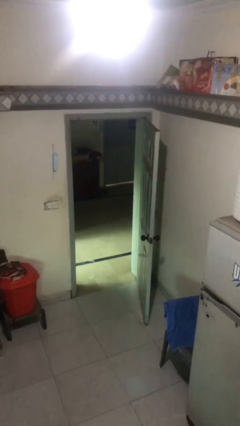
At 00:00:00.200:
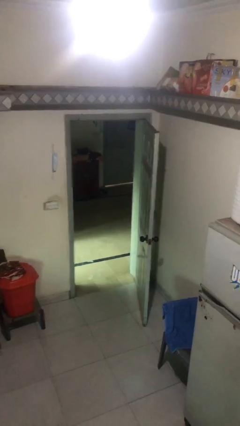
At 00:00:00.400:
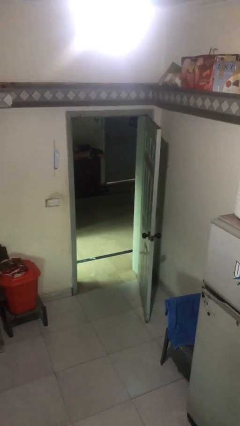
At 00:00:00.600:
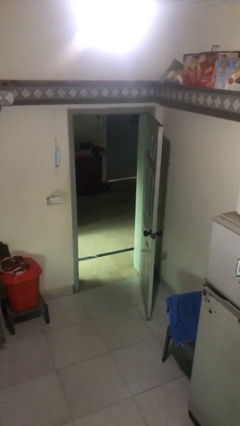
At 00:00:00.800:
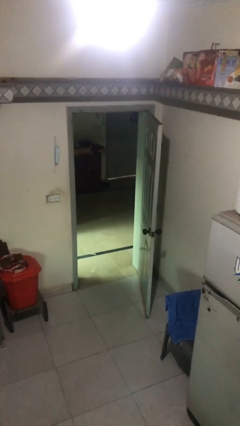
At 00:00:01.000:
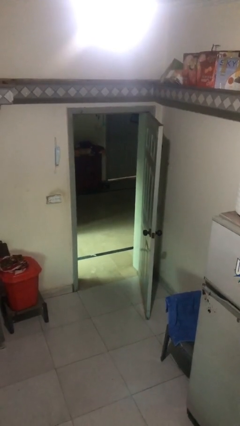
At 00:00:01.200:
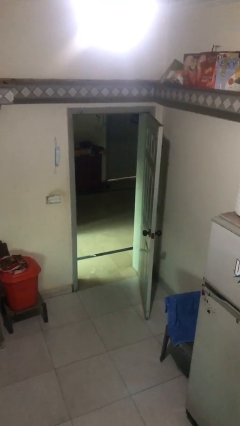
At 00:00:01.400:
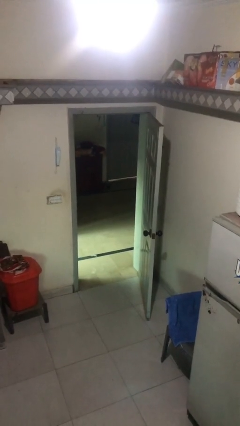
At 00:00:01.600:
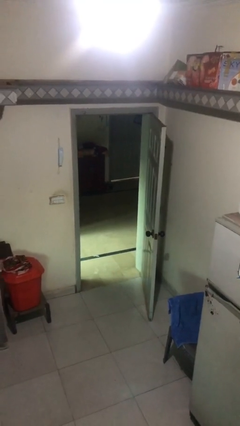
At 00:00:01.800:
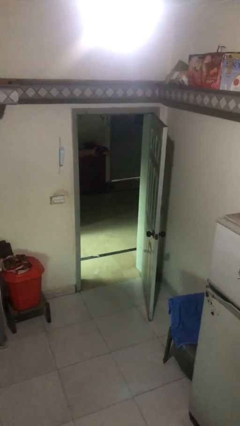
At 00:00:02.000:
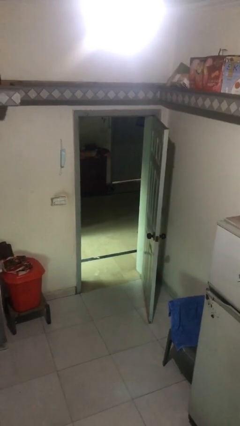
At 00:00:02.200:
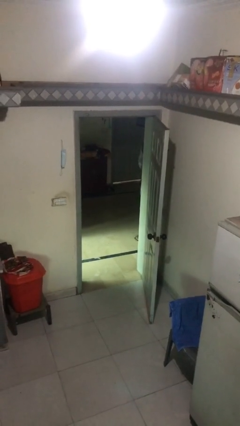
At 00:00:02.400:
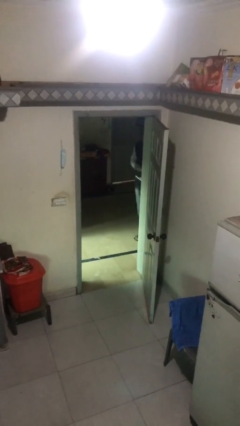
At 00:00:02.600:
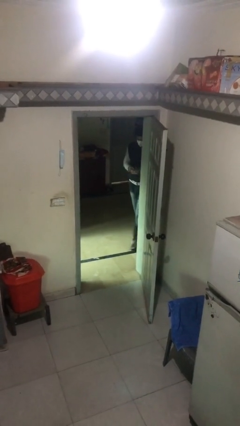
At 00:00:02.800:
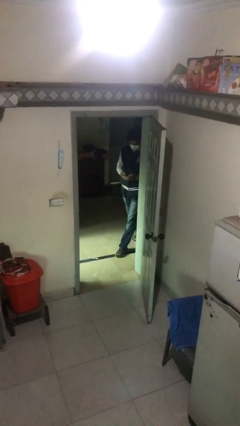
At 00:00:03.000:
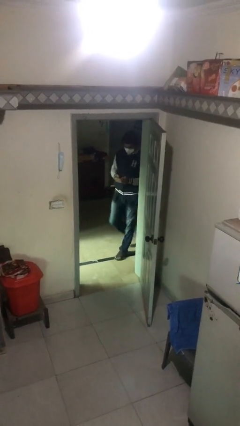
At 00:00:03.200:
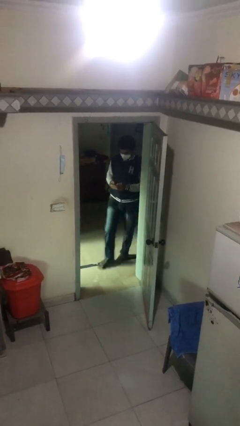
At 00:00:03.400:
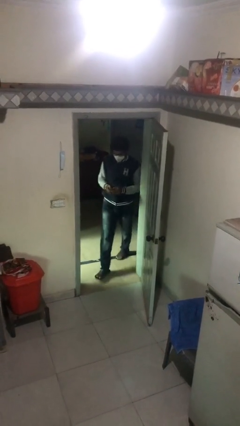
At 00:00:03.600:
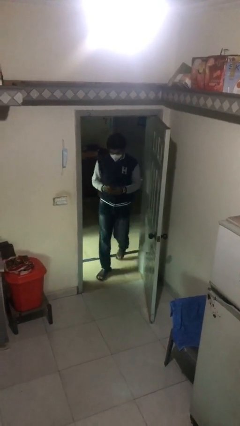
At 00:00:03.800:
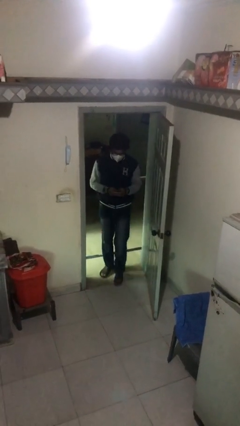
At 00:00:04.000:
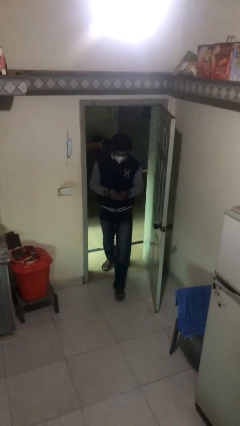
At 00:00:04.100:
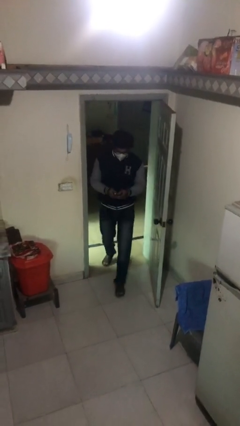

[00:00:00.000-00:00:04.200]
person enters scene through structure

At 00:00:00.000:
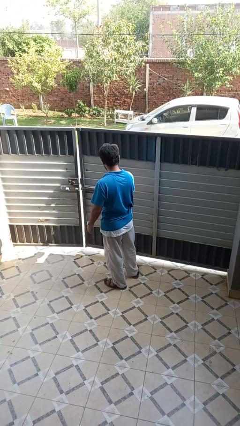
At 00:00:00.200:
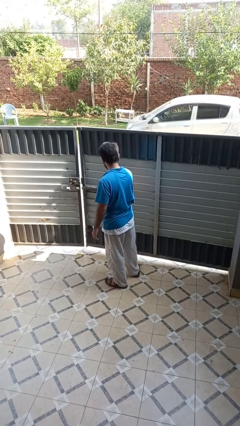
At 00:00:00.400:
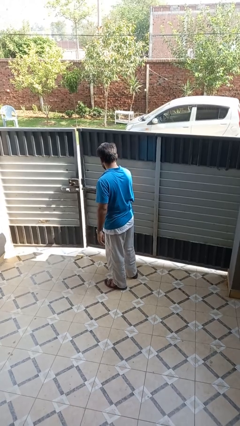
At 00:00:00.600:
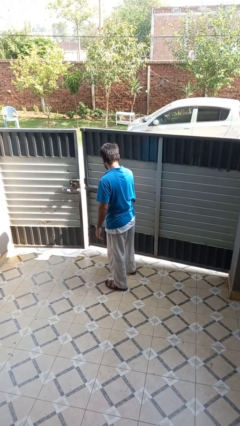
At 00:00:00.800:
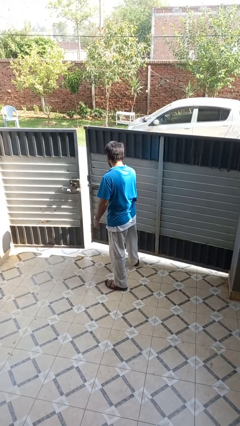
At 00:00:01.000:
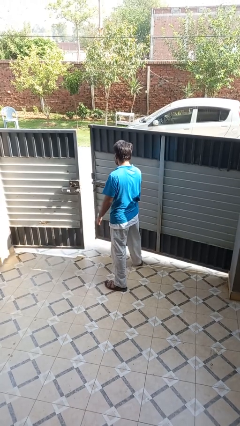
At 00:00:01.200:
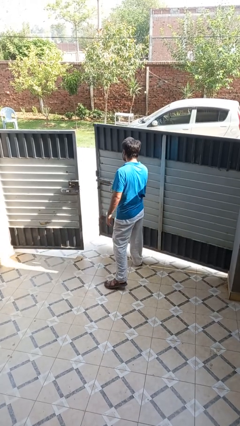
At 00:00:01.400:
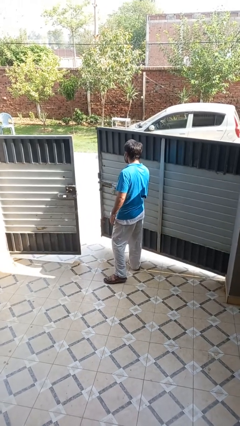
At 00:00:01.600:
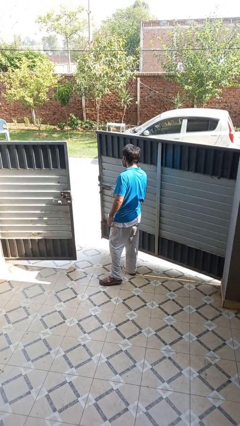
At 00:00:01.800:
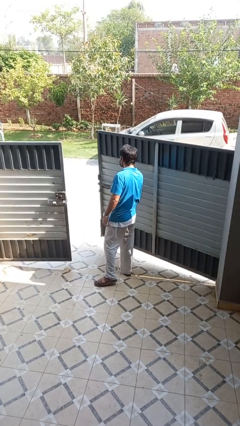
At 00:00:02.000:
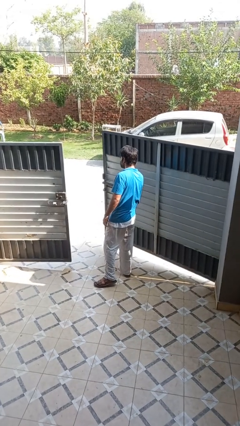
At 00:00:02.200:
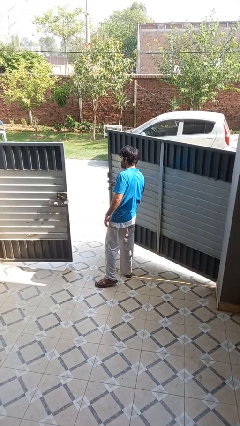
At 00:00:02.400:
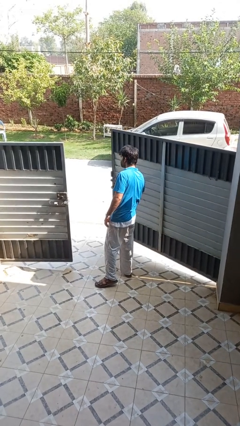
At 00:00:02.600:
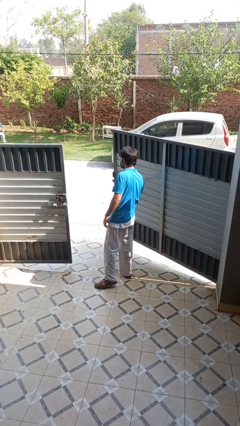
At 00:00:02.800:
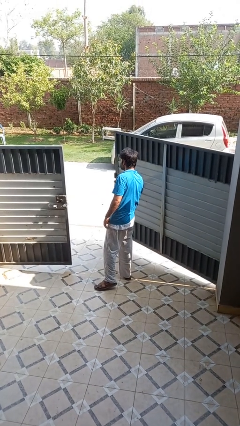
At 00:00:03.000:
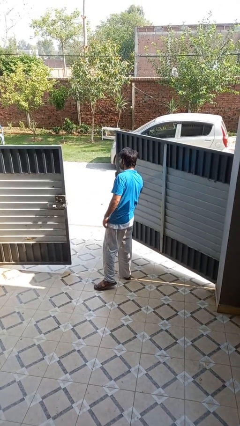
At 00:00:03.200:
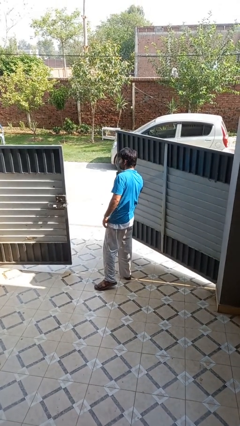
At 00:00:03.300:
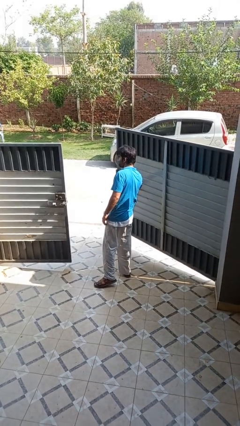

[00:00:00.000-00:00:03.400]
person opens gate

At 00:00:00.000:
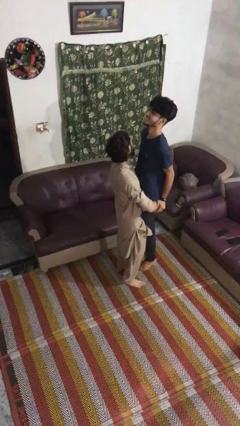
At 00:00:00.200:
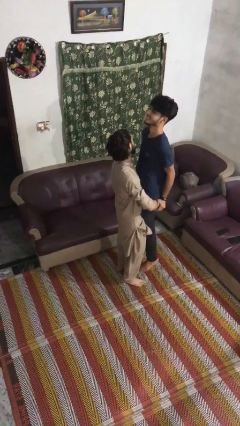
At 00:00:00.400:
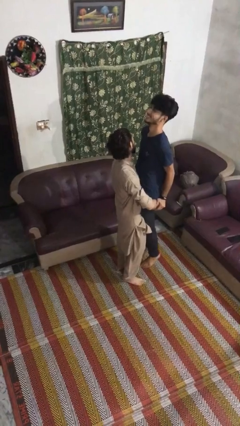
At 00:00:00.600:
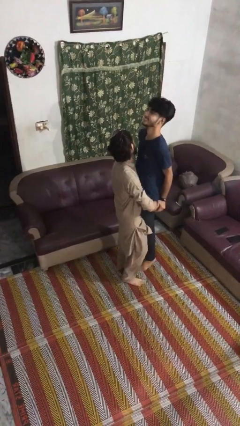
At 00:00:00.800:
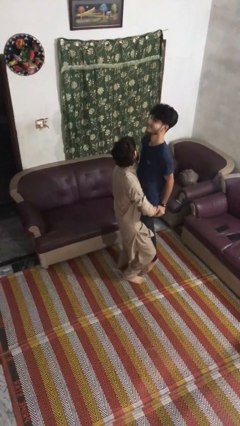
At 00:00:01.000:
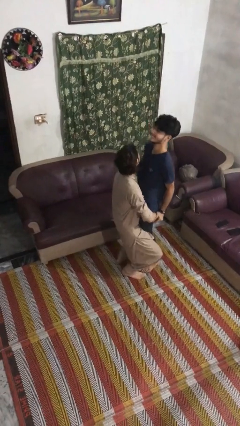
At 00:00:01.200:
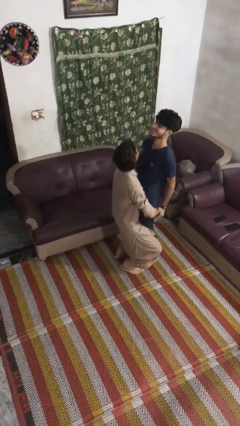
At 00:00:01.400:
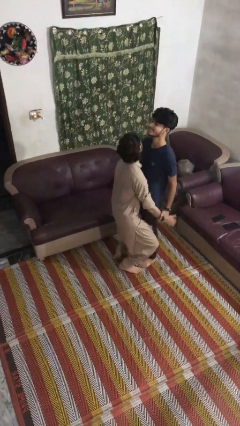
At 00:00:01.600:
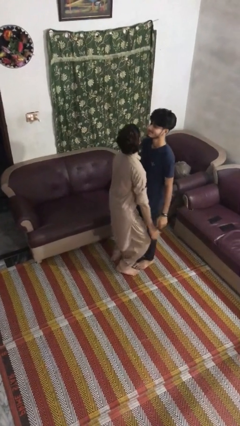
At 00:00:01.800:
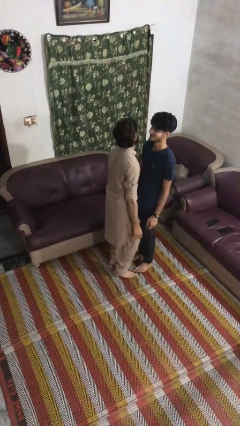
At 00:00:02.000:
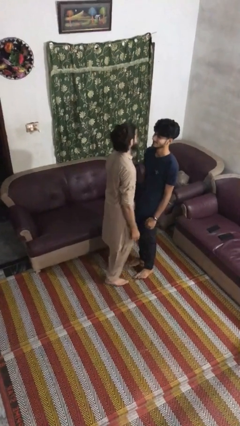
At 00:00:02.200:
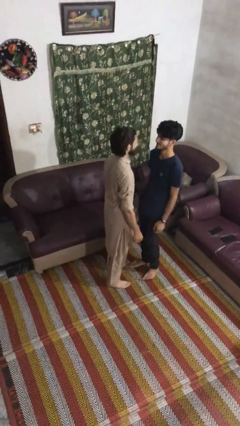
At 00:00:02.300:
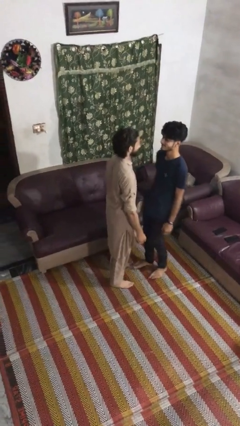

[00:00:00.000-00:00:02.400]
person puts down person

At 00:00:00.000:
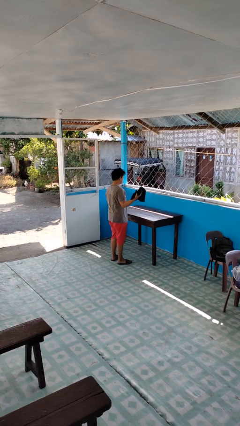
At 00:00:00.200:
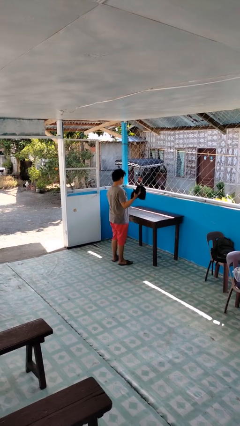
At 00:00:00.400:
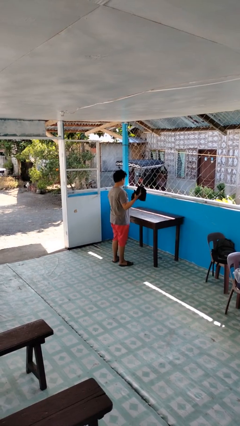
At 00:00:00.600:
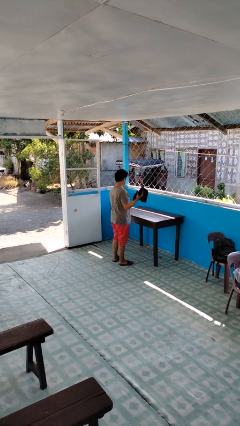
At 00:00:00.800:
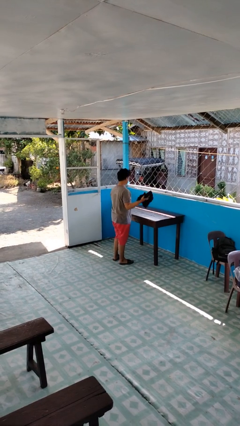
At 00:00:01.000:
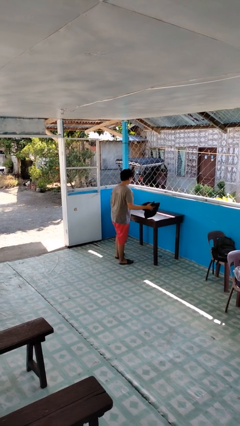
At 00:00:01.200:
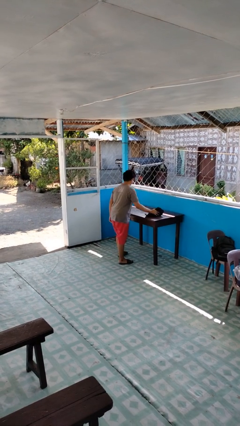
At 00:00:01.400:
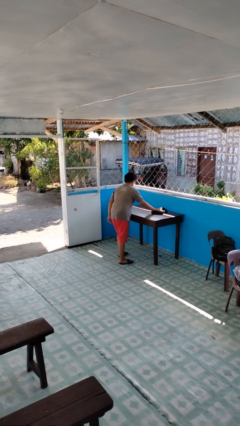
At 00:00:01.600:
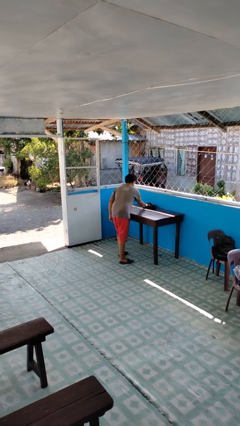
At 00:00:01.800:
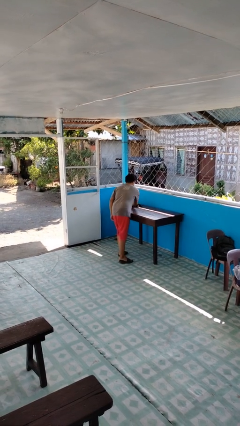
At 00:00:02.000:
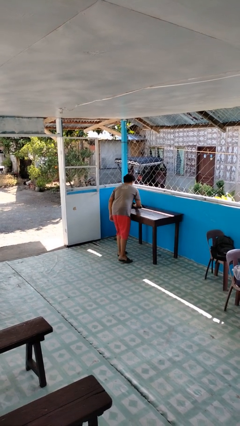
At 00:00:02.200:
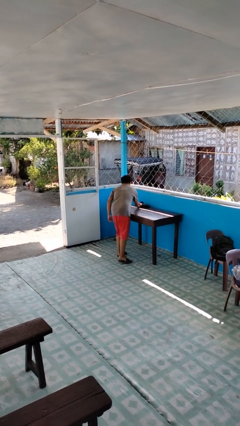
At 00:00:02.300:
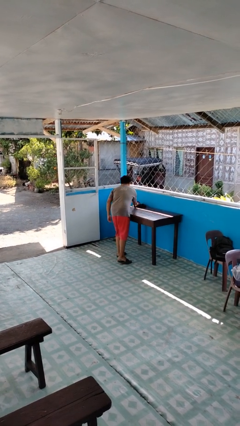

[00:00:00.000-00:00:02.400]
person cleans table with rag

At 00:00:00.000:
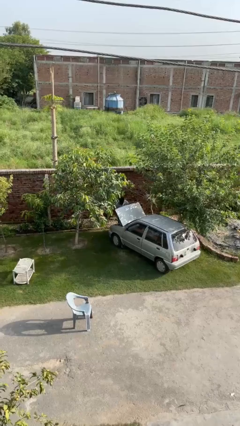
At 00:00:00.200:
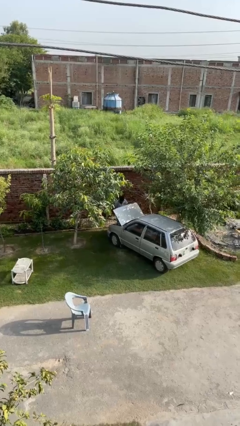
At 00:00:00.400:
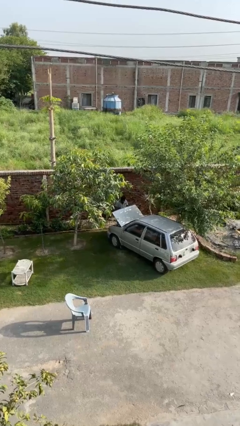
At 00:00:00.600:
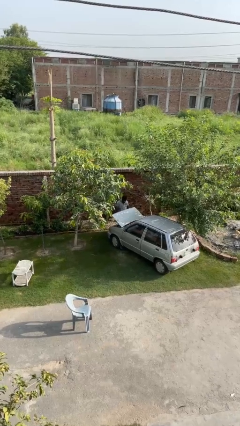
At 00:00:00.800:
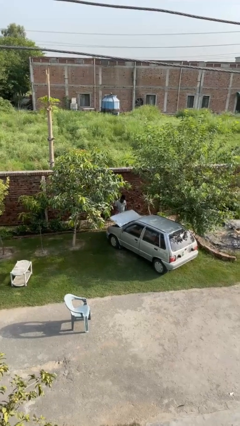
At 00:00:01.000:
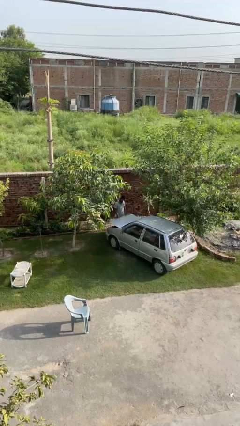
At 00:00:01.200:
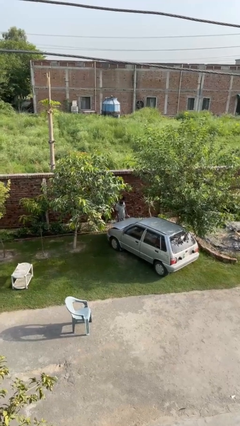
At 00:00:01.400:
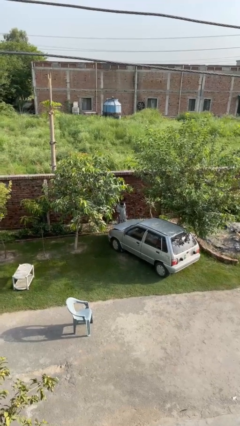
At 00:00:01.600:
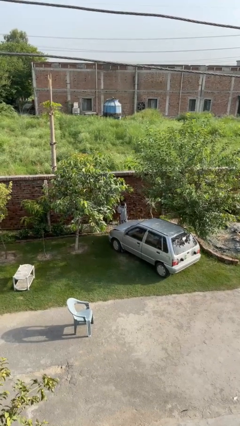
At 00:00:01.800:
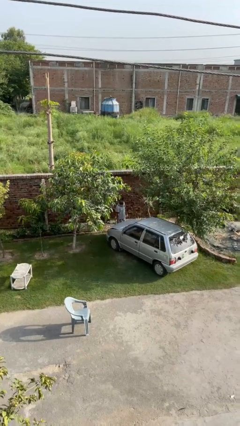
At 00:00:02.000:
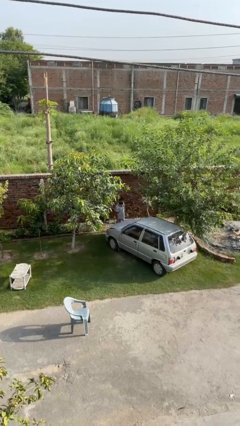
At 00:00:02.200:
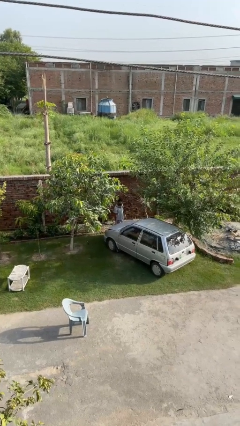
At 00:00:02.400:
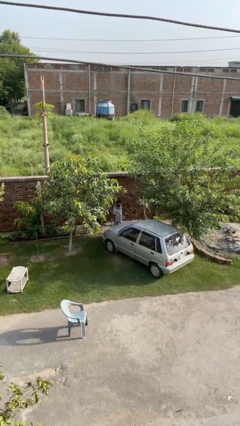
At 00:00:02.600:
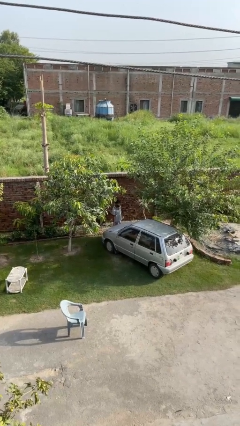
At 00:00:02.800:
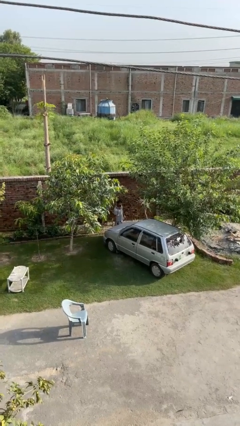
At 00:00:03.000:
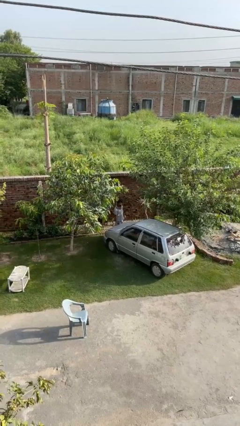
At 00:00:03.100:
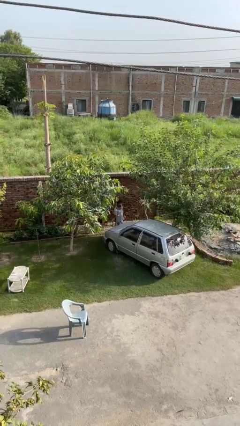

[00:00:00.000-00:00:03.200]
person closes car hood

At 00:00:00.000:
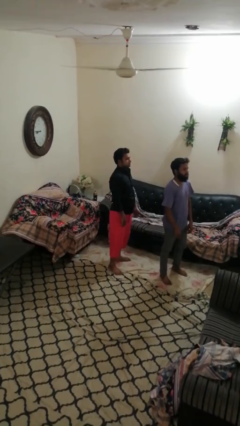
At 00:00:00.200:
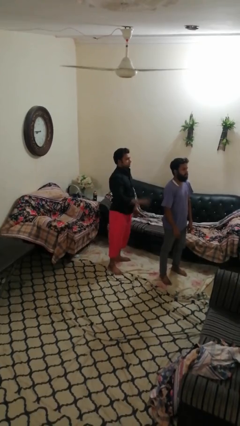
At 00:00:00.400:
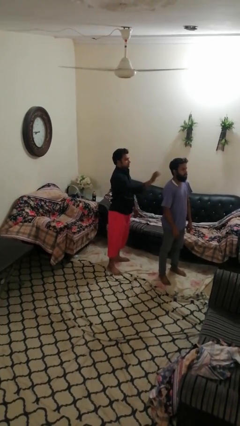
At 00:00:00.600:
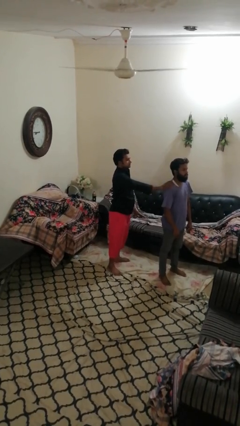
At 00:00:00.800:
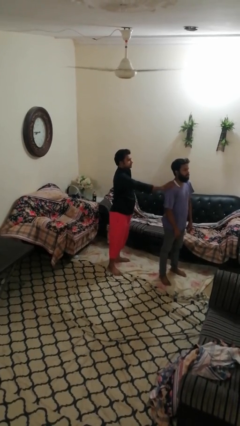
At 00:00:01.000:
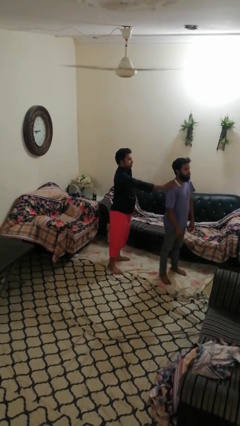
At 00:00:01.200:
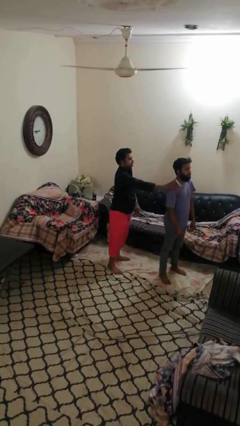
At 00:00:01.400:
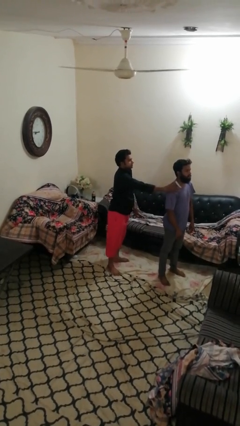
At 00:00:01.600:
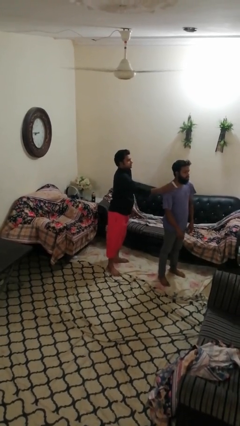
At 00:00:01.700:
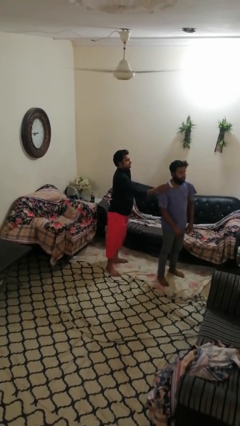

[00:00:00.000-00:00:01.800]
person grabs person by shoulder
